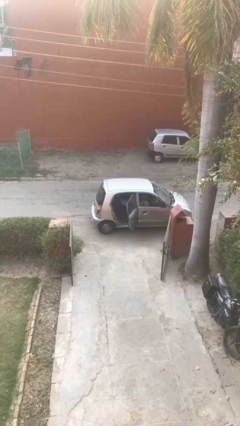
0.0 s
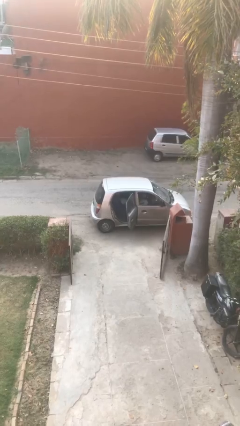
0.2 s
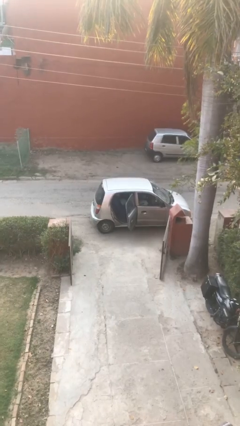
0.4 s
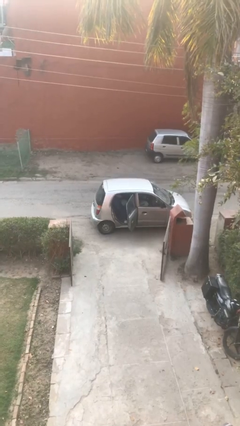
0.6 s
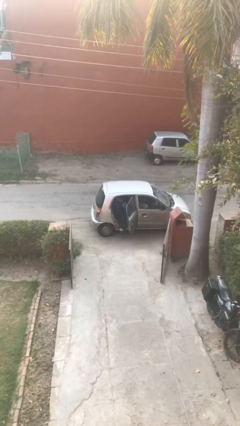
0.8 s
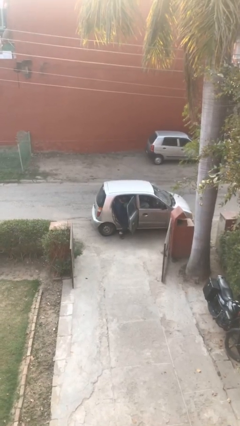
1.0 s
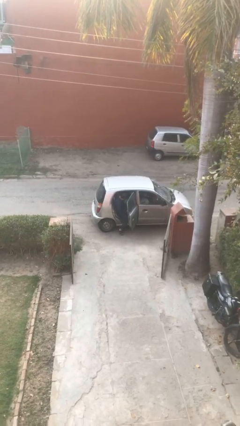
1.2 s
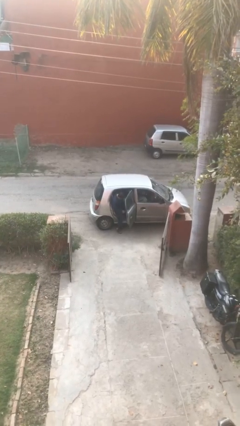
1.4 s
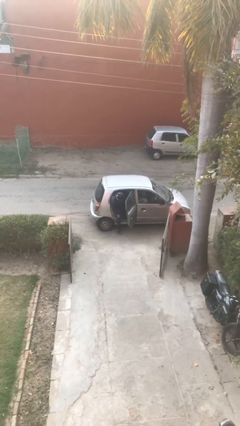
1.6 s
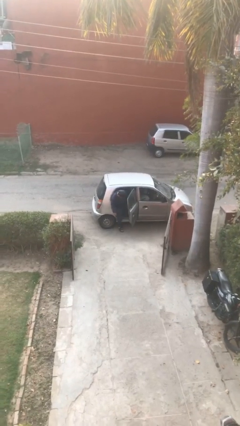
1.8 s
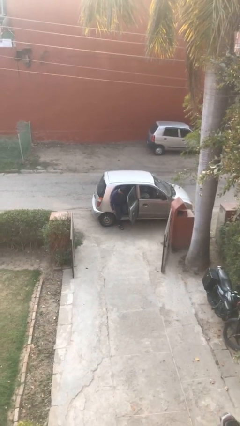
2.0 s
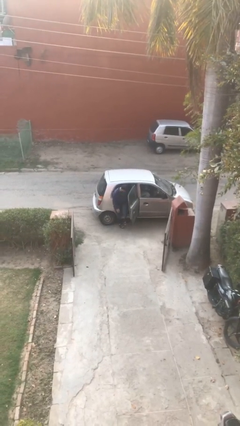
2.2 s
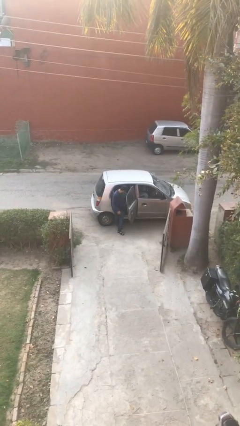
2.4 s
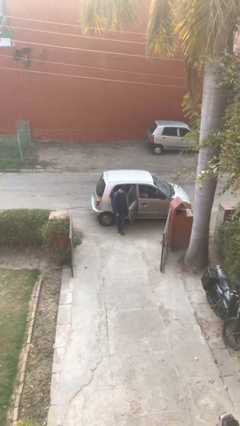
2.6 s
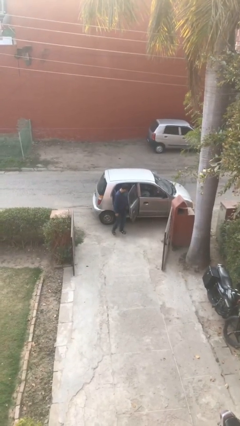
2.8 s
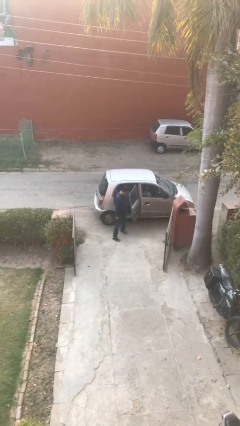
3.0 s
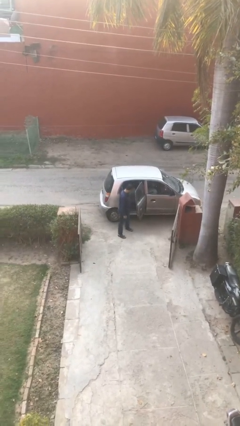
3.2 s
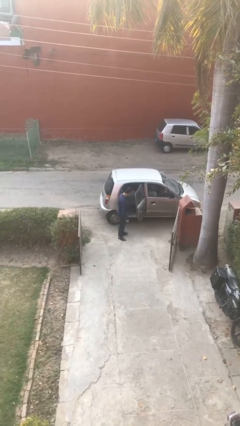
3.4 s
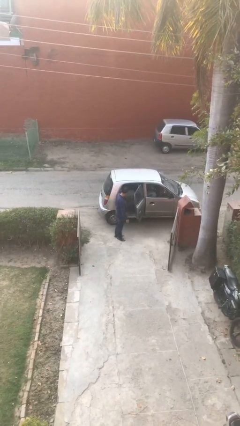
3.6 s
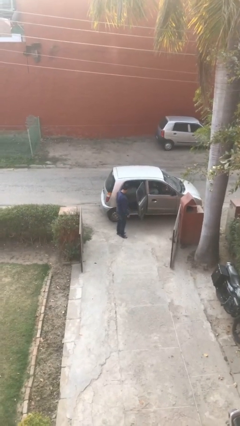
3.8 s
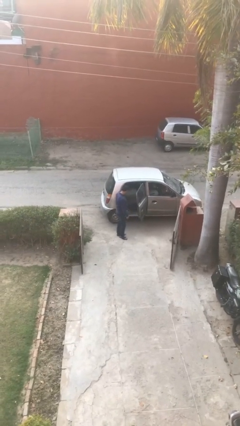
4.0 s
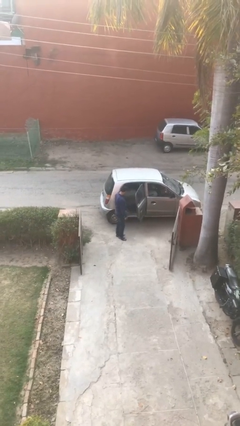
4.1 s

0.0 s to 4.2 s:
person exits car

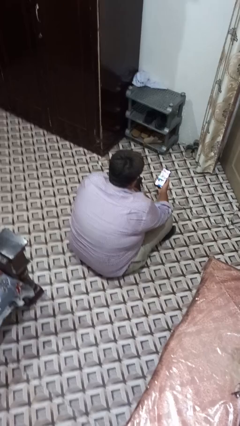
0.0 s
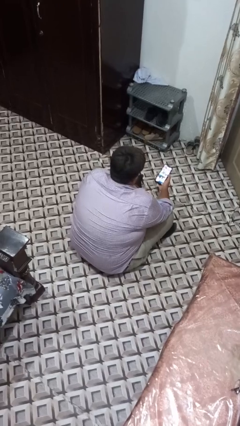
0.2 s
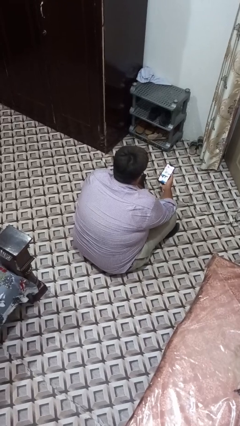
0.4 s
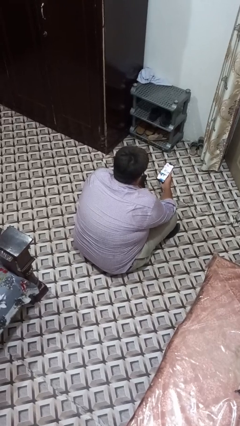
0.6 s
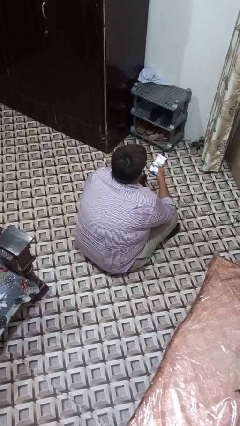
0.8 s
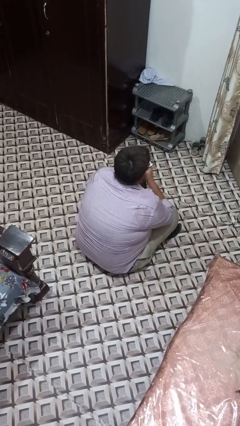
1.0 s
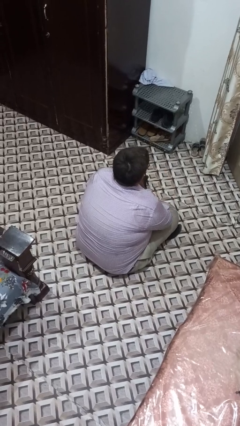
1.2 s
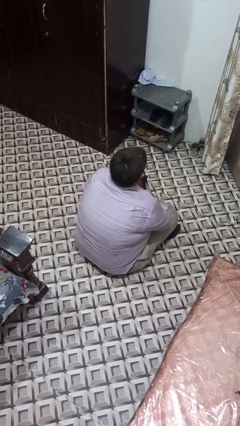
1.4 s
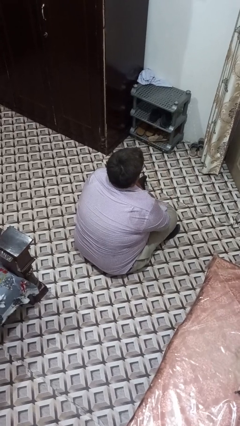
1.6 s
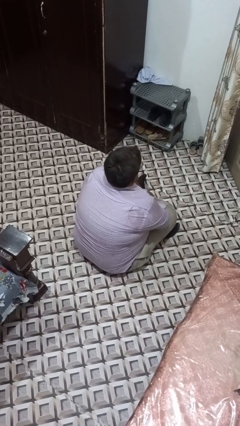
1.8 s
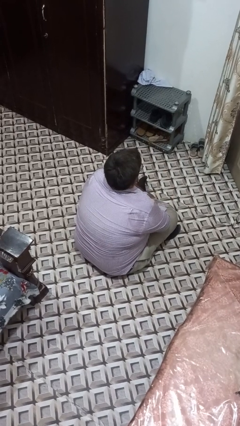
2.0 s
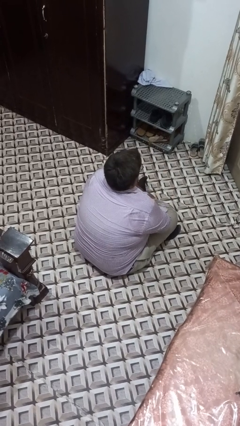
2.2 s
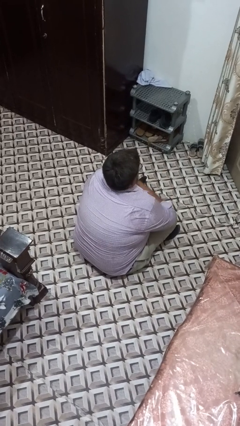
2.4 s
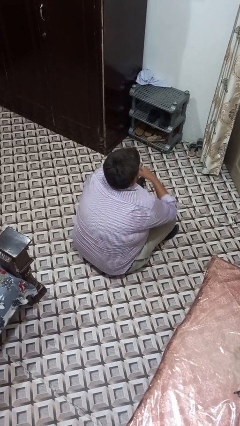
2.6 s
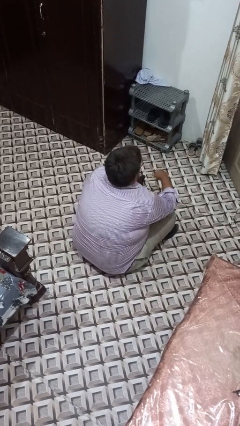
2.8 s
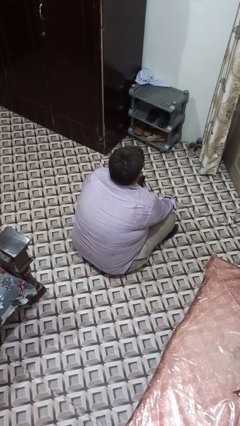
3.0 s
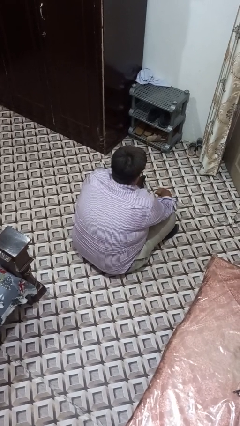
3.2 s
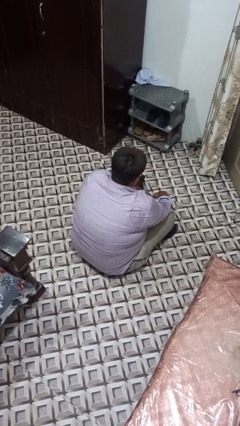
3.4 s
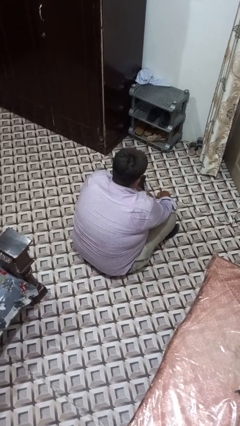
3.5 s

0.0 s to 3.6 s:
person puts phone into pocket

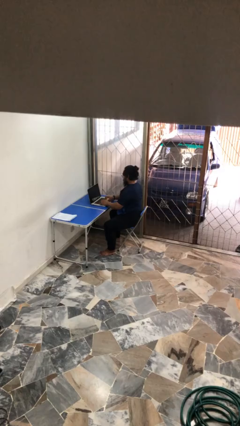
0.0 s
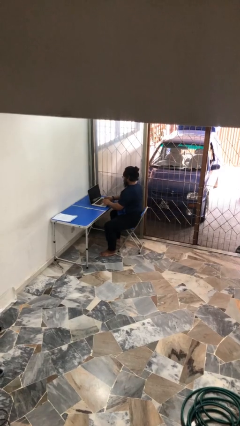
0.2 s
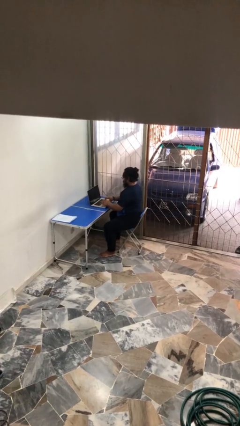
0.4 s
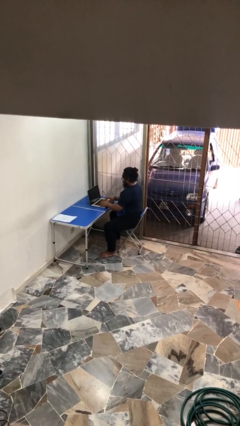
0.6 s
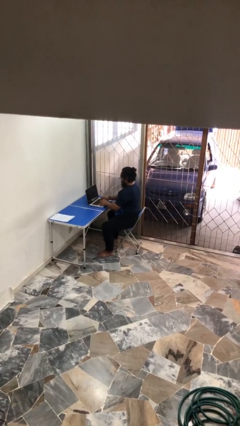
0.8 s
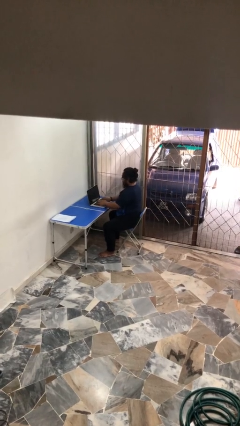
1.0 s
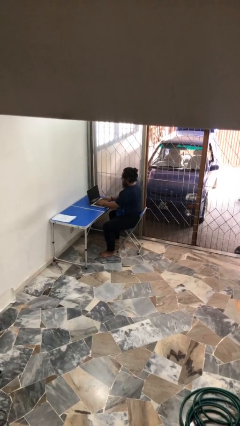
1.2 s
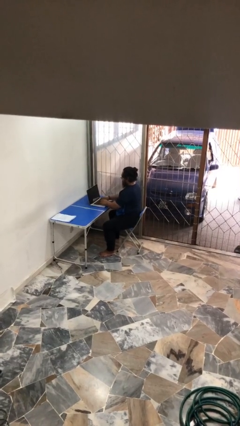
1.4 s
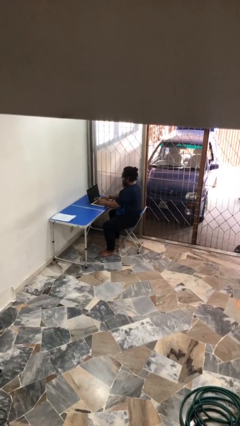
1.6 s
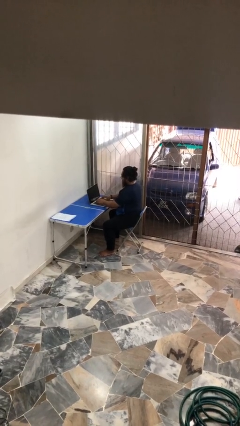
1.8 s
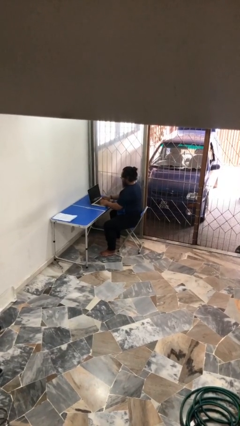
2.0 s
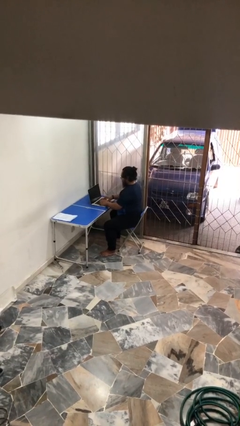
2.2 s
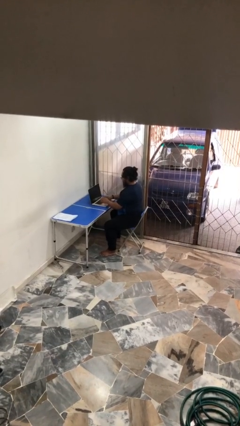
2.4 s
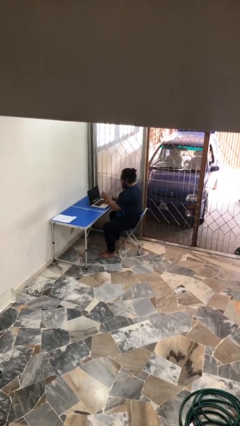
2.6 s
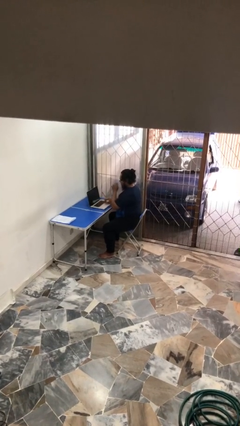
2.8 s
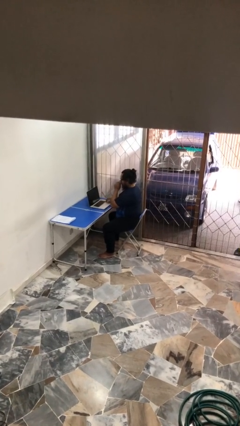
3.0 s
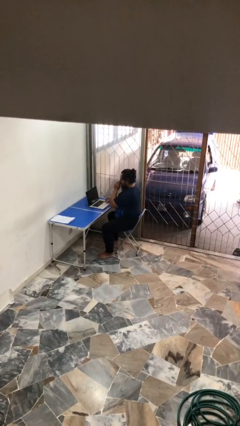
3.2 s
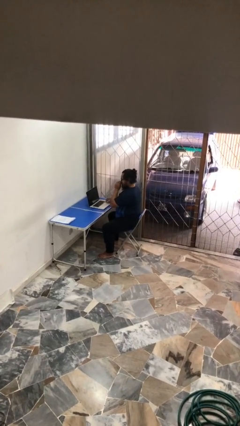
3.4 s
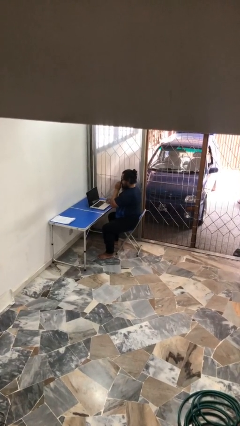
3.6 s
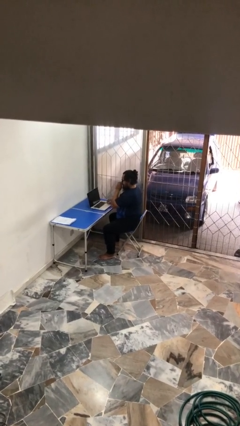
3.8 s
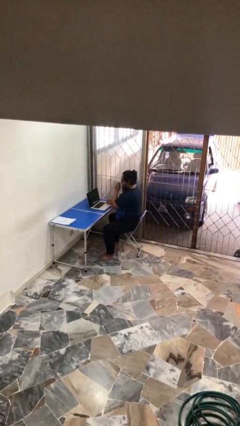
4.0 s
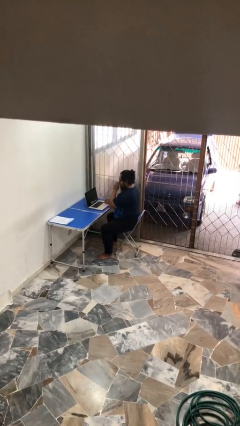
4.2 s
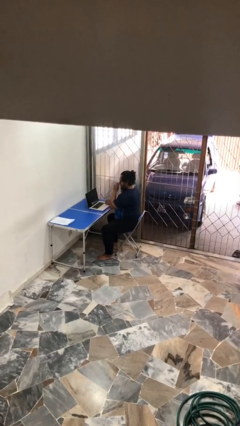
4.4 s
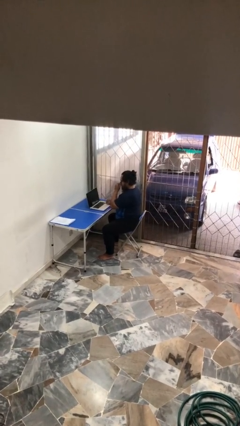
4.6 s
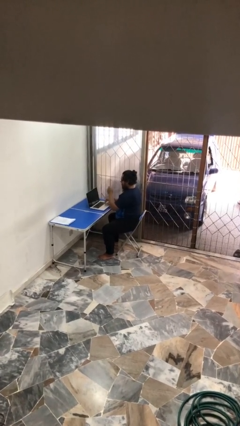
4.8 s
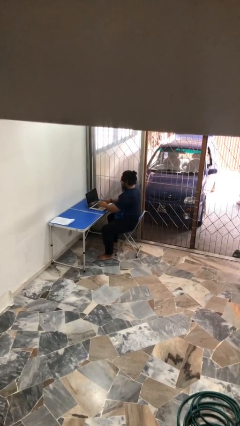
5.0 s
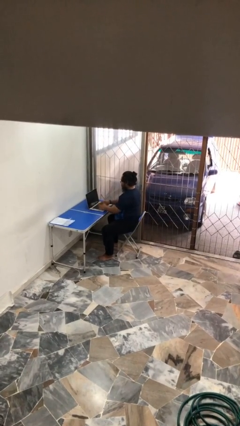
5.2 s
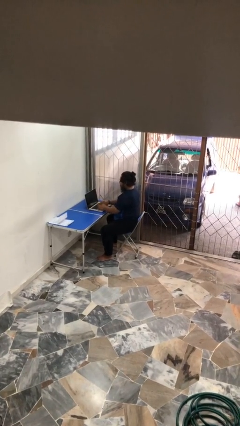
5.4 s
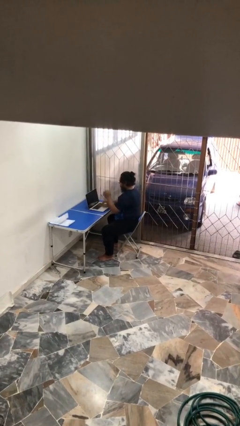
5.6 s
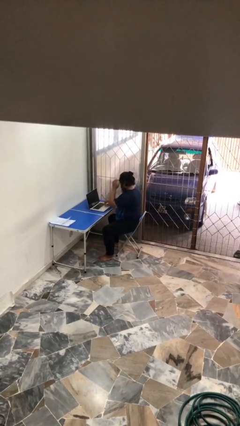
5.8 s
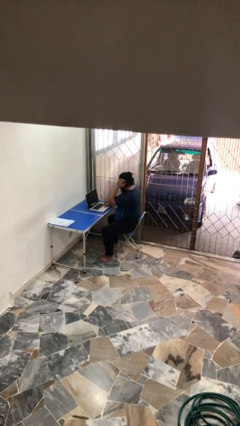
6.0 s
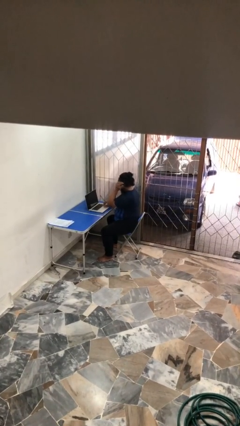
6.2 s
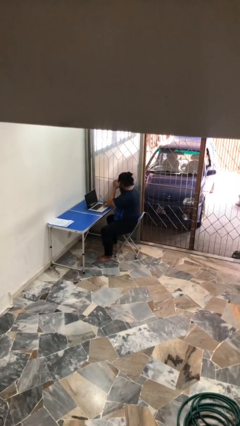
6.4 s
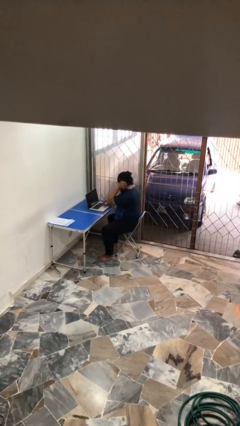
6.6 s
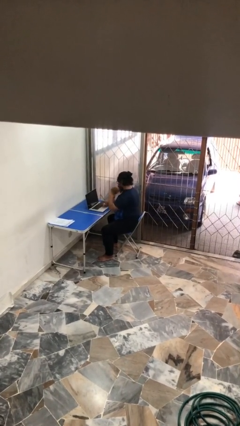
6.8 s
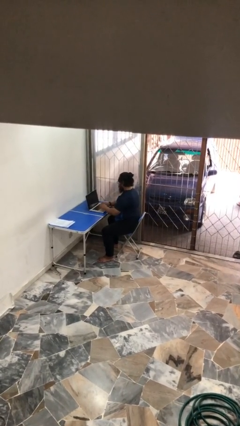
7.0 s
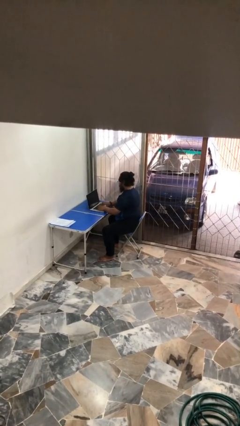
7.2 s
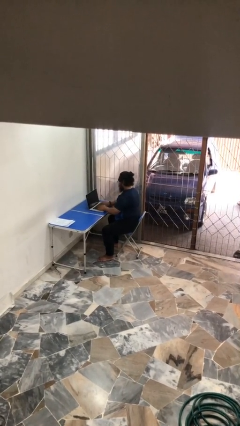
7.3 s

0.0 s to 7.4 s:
person interacts with laptop

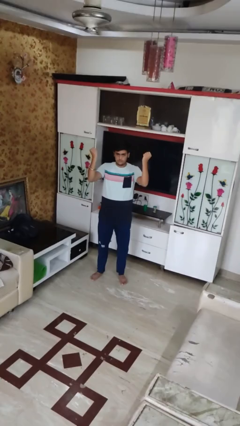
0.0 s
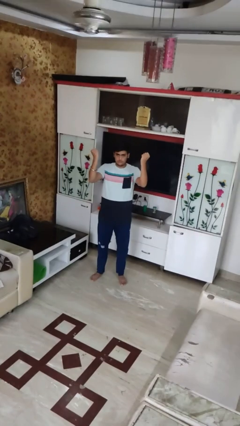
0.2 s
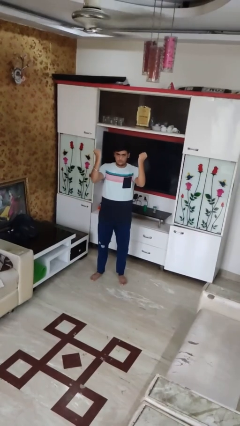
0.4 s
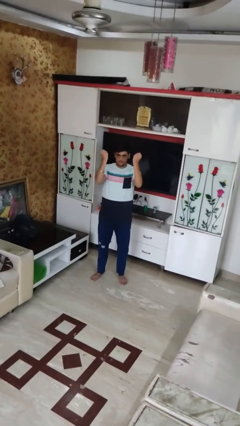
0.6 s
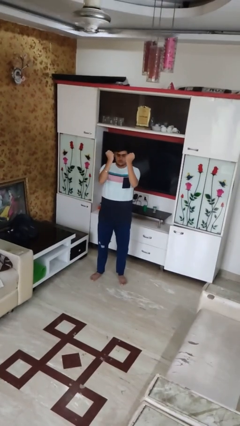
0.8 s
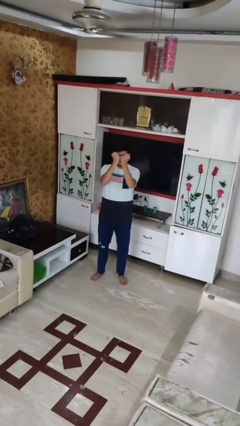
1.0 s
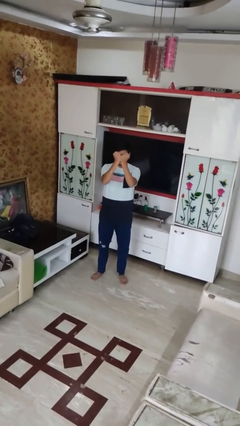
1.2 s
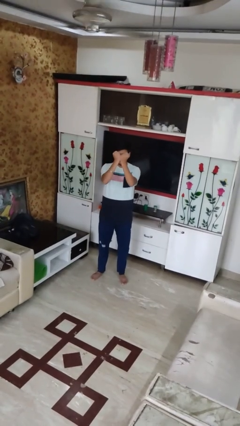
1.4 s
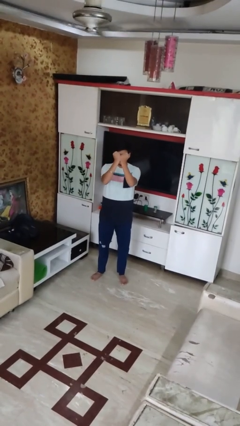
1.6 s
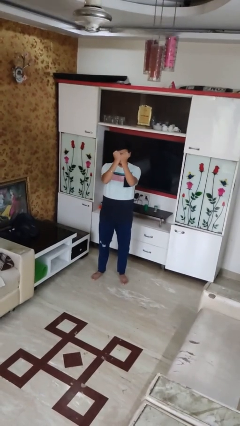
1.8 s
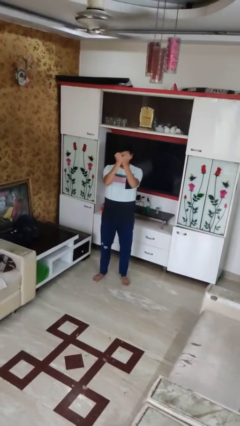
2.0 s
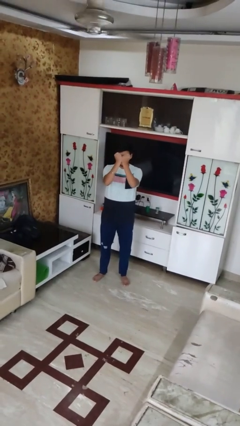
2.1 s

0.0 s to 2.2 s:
person gestures zoom out

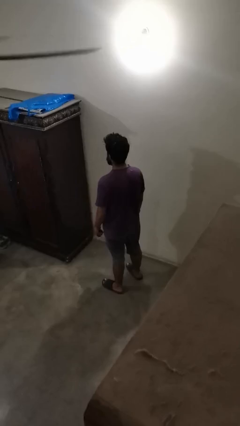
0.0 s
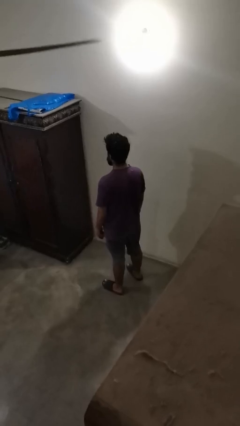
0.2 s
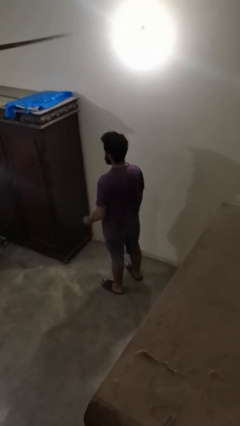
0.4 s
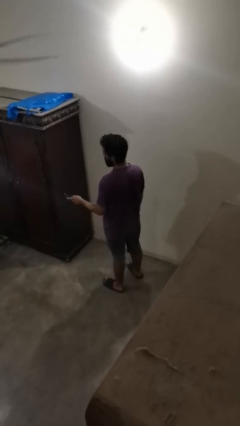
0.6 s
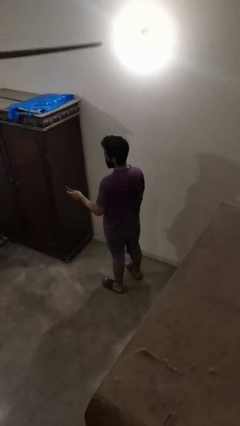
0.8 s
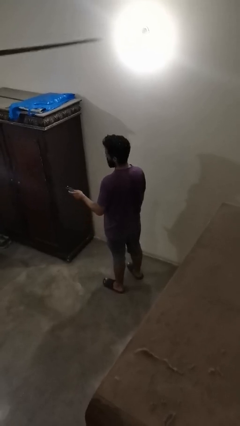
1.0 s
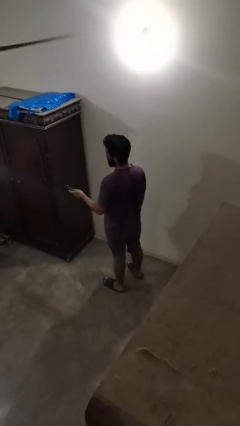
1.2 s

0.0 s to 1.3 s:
person uses television remote
